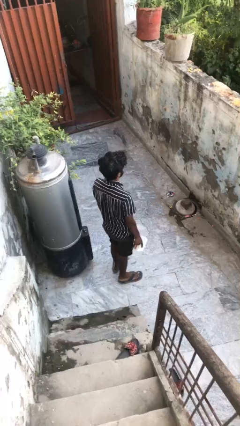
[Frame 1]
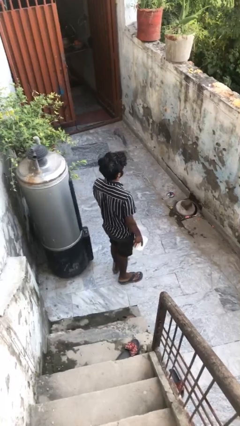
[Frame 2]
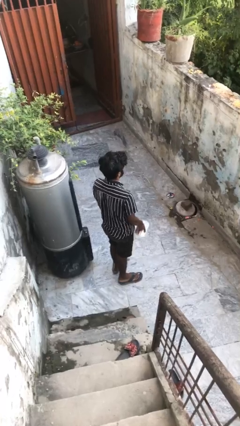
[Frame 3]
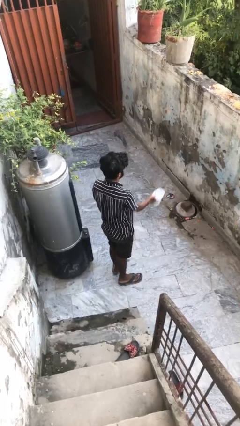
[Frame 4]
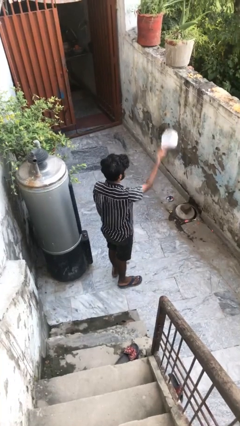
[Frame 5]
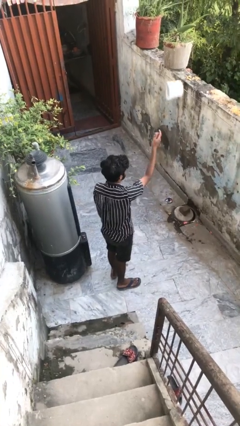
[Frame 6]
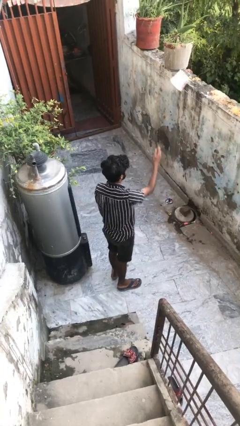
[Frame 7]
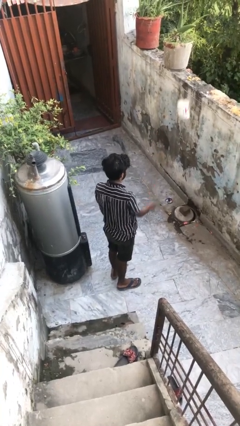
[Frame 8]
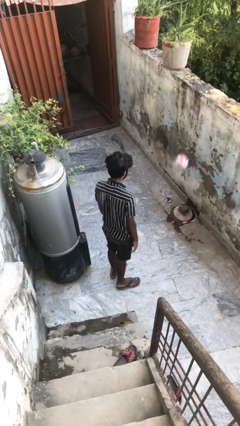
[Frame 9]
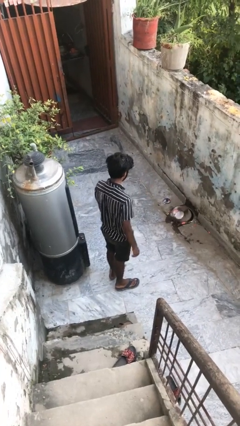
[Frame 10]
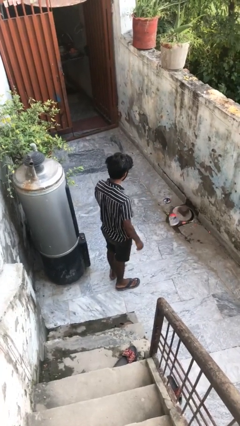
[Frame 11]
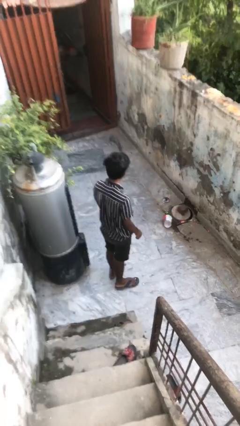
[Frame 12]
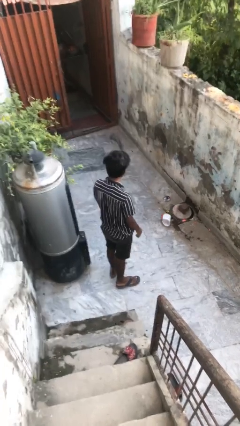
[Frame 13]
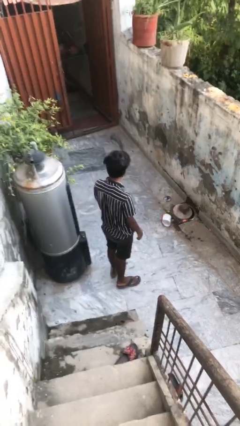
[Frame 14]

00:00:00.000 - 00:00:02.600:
person throws object into air

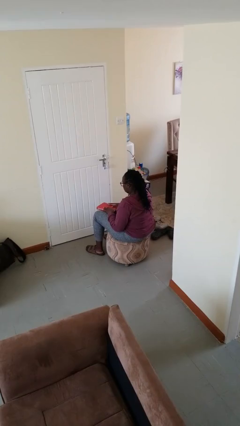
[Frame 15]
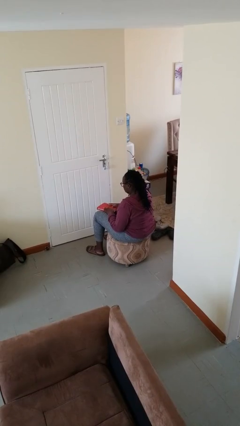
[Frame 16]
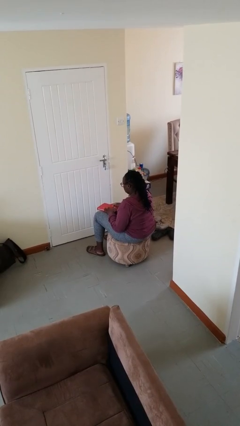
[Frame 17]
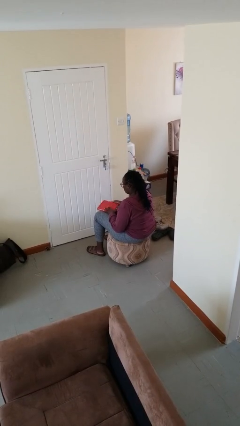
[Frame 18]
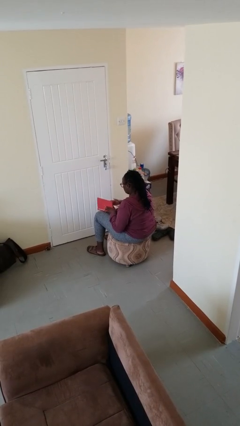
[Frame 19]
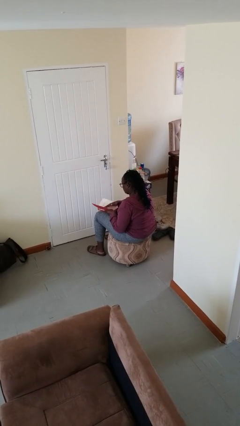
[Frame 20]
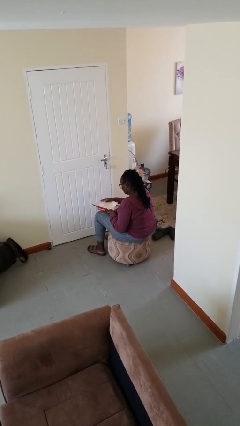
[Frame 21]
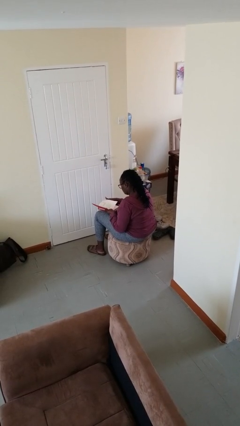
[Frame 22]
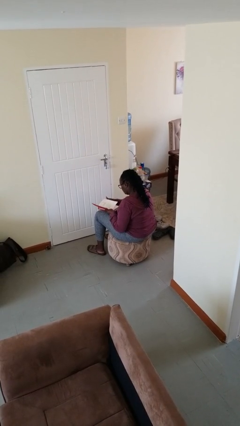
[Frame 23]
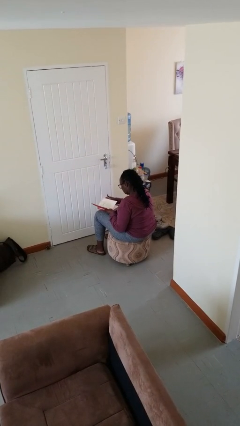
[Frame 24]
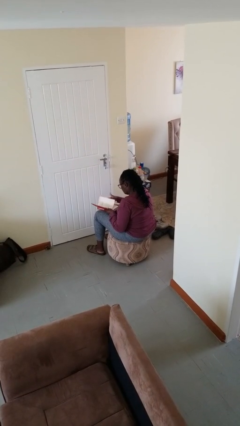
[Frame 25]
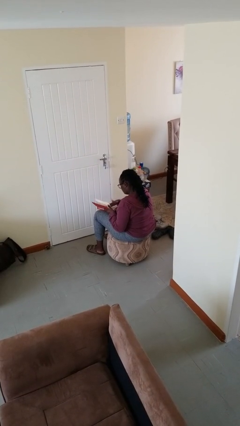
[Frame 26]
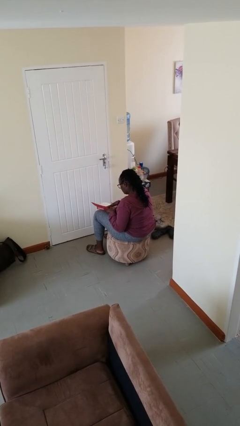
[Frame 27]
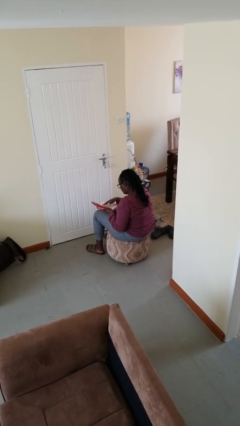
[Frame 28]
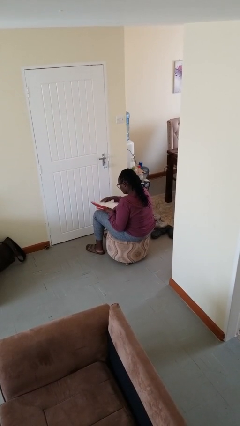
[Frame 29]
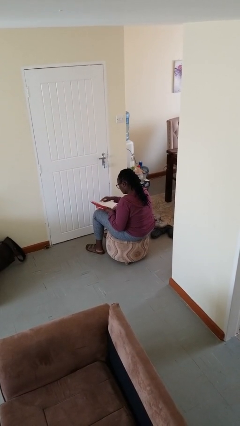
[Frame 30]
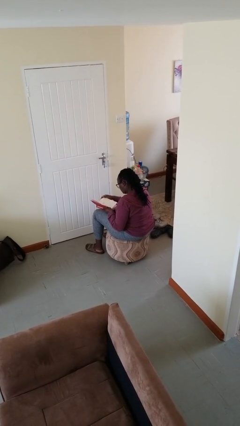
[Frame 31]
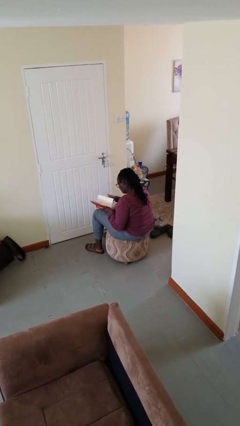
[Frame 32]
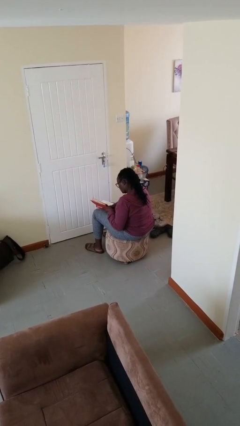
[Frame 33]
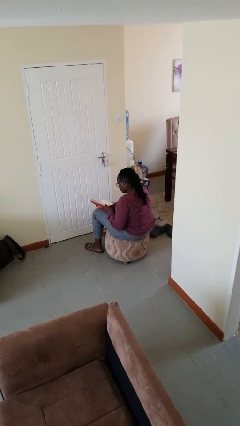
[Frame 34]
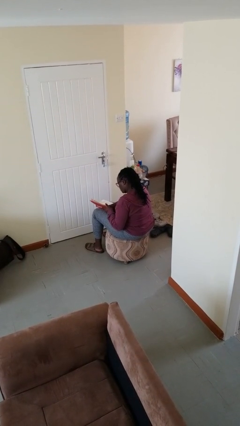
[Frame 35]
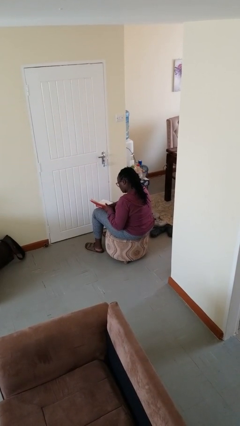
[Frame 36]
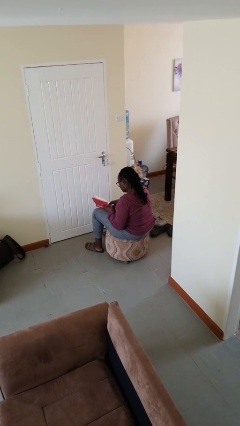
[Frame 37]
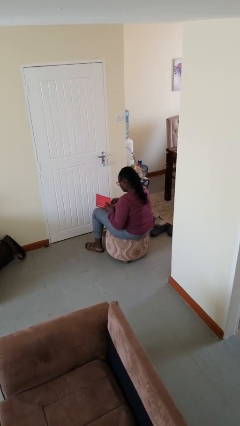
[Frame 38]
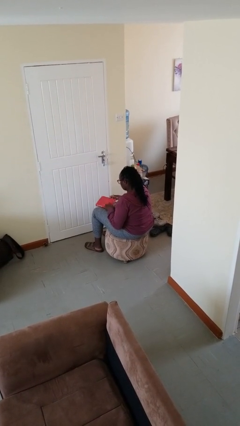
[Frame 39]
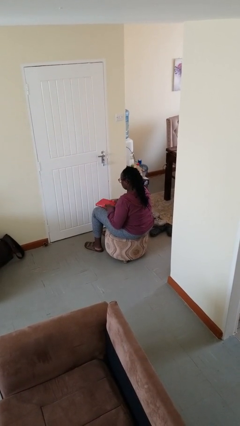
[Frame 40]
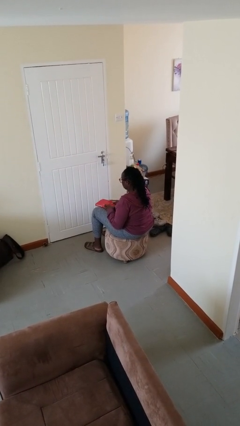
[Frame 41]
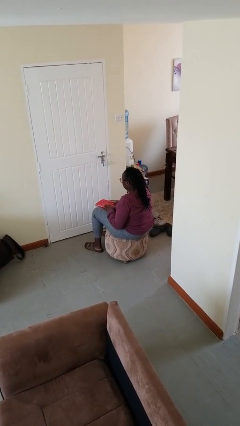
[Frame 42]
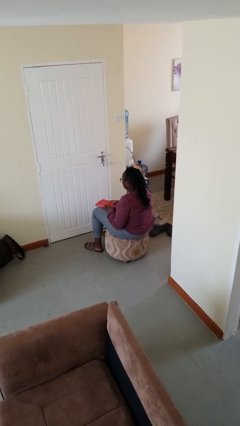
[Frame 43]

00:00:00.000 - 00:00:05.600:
person reads book

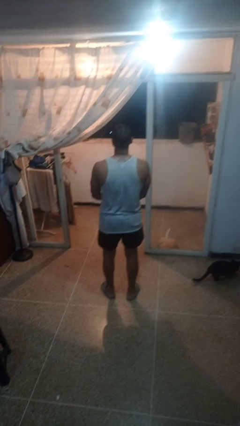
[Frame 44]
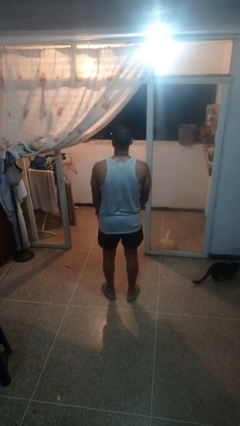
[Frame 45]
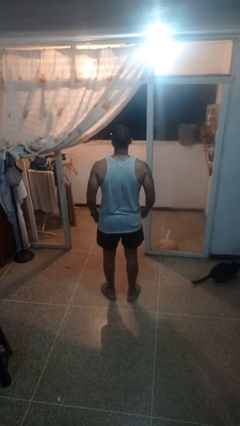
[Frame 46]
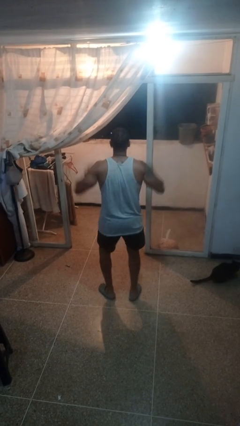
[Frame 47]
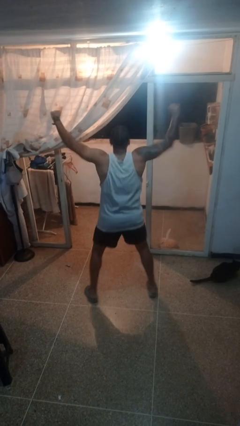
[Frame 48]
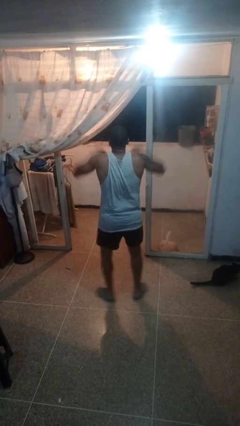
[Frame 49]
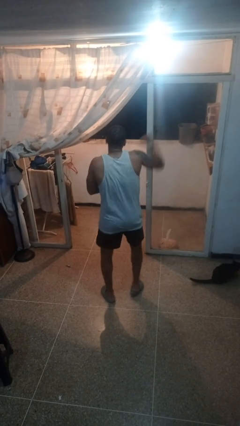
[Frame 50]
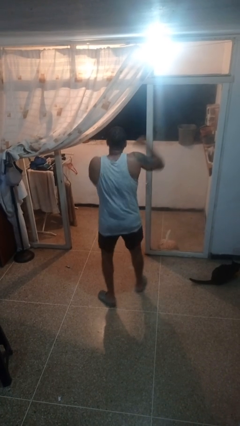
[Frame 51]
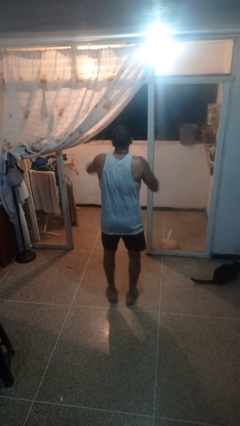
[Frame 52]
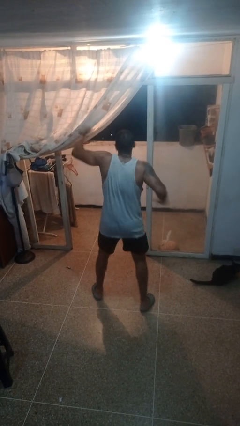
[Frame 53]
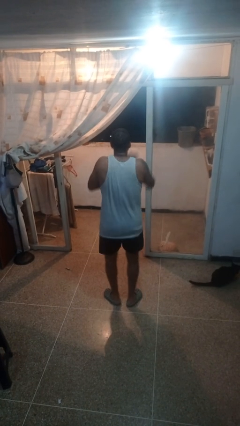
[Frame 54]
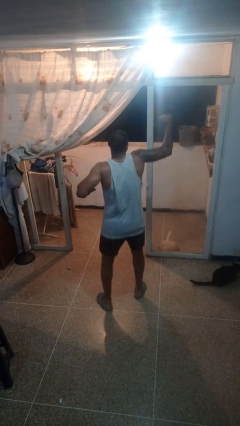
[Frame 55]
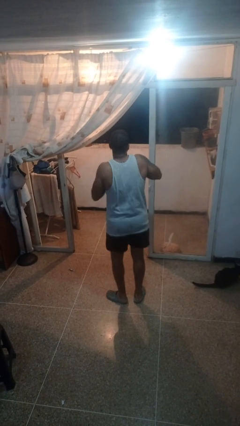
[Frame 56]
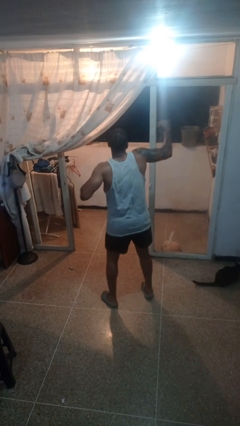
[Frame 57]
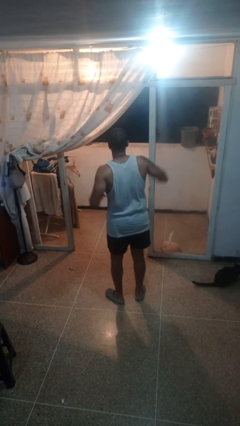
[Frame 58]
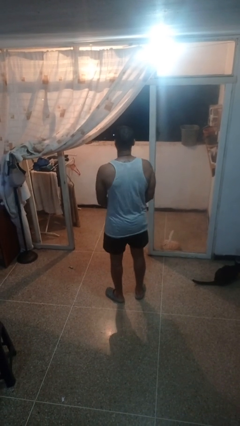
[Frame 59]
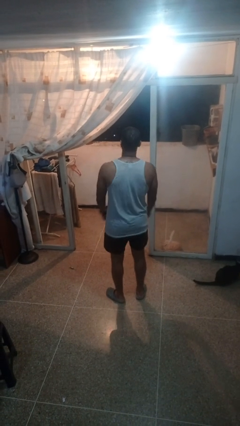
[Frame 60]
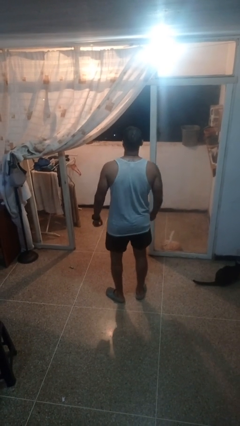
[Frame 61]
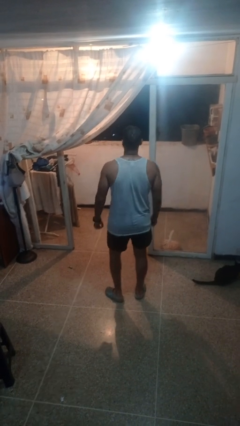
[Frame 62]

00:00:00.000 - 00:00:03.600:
person dances in place

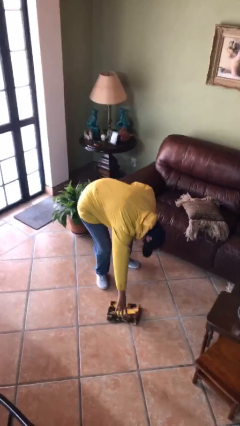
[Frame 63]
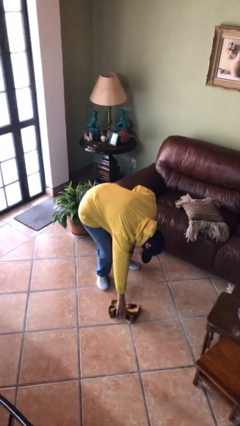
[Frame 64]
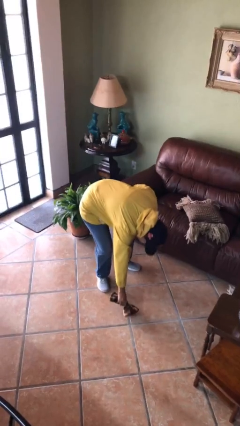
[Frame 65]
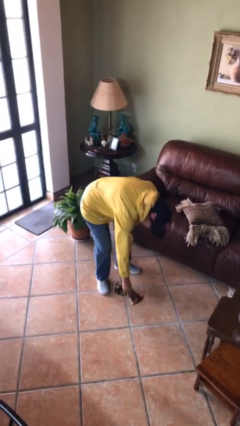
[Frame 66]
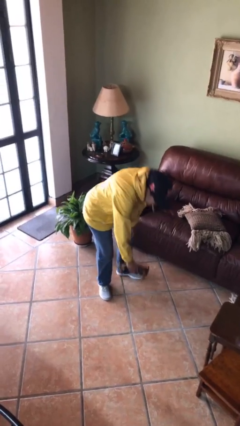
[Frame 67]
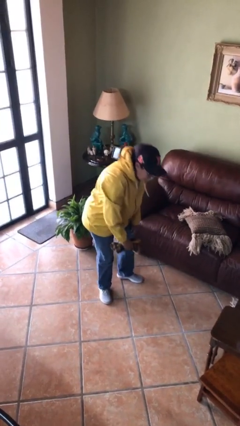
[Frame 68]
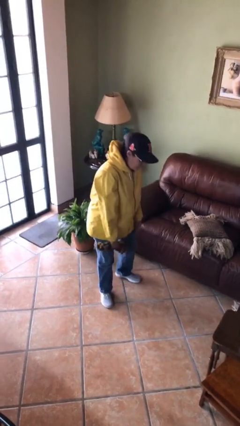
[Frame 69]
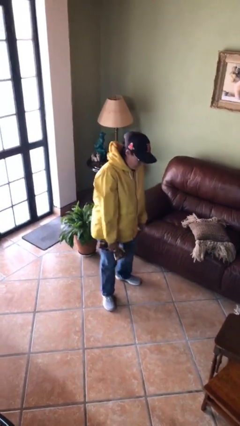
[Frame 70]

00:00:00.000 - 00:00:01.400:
person picks up object from floor

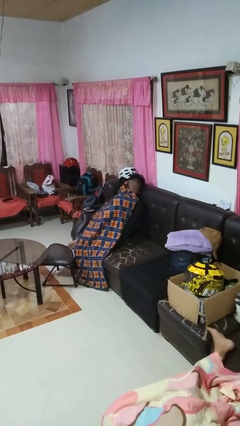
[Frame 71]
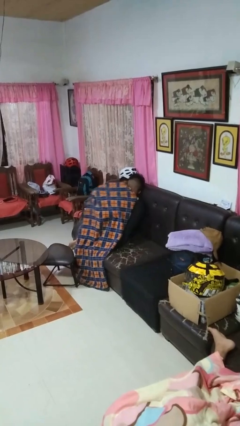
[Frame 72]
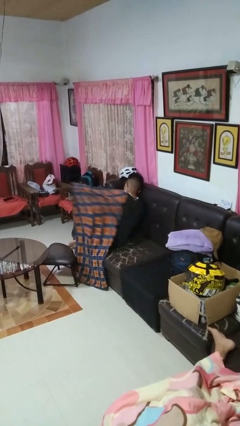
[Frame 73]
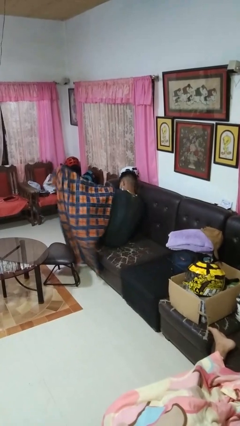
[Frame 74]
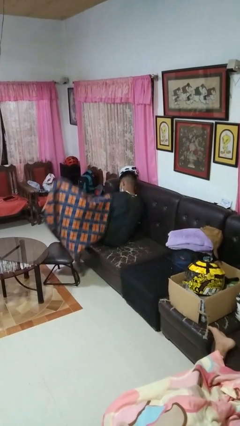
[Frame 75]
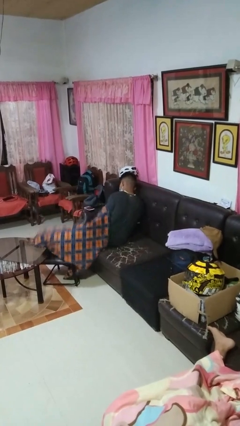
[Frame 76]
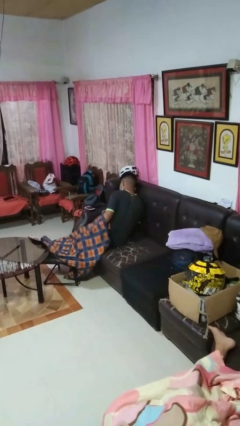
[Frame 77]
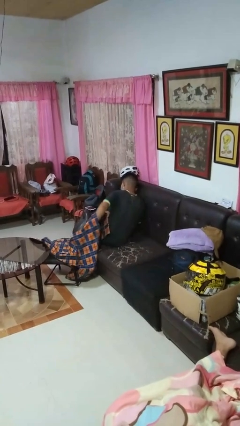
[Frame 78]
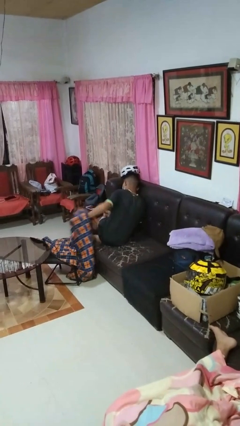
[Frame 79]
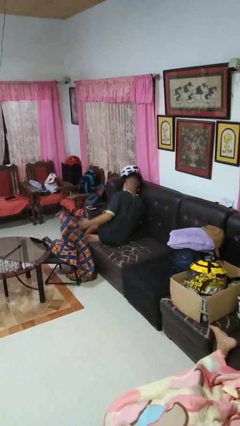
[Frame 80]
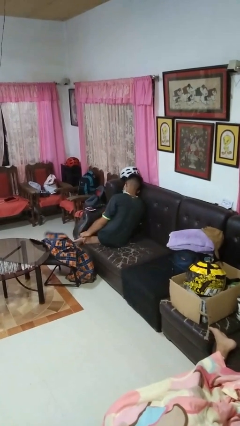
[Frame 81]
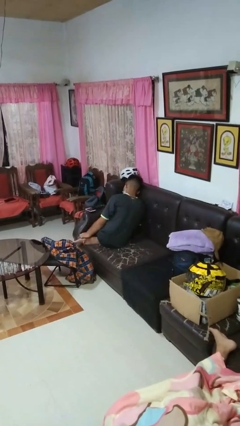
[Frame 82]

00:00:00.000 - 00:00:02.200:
person uncovers with blanket

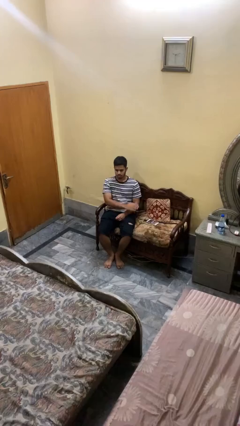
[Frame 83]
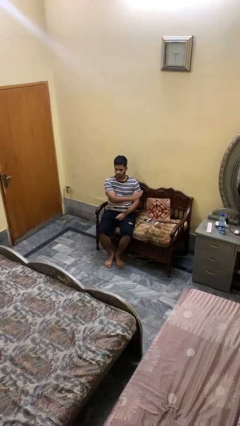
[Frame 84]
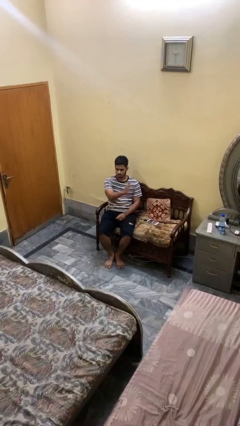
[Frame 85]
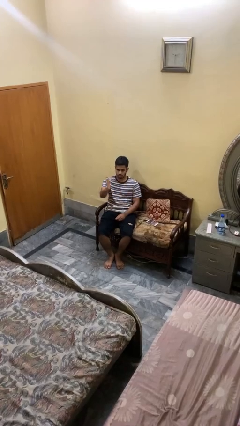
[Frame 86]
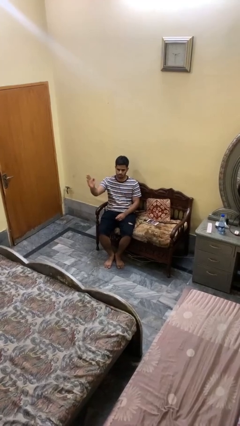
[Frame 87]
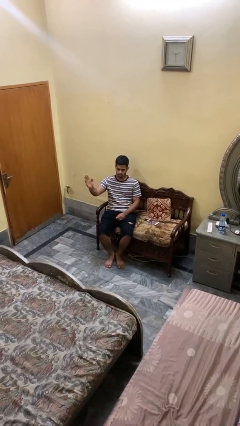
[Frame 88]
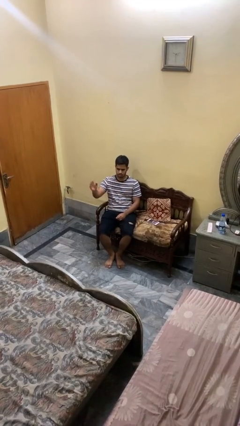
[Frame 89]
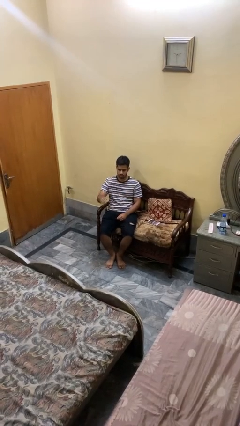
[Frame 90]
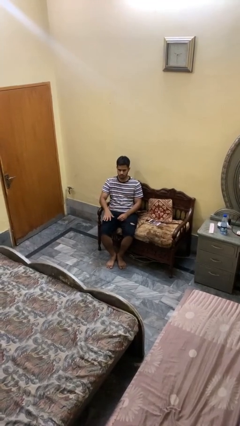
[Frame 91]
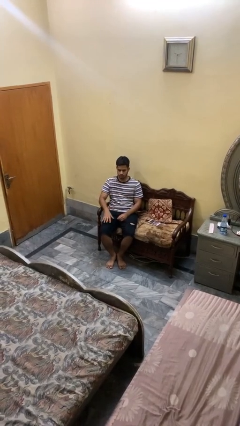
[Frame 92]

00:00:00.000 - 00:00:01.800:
person gestures swipe right
